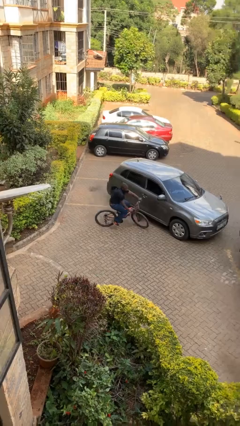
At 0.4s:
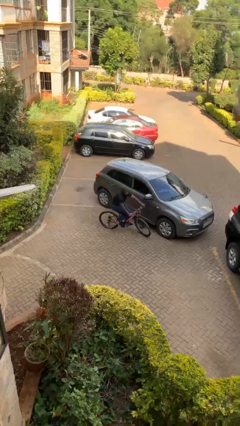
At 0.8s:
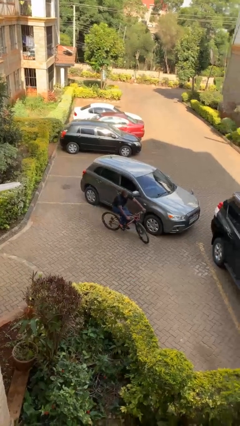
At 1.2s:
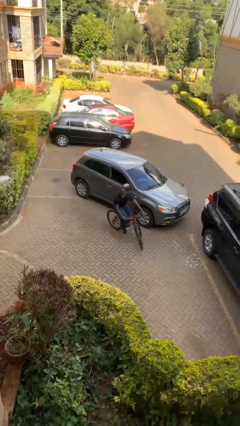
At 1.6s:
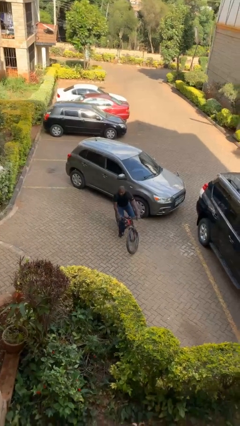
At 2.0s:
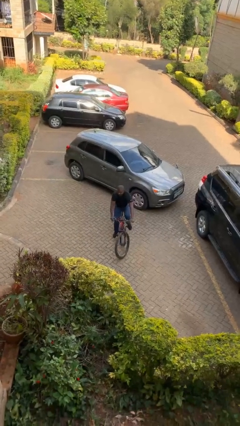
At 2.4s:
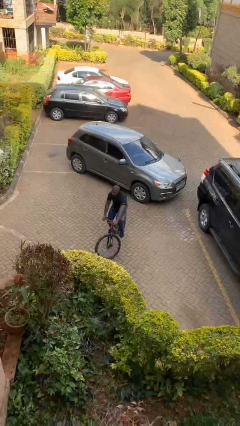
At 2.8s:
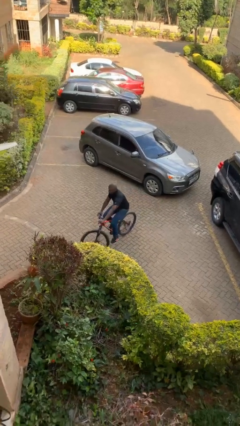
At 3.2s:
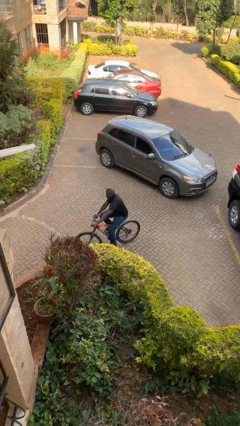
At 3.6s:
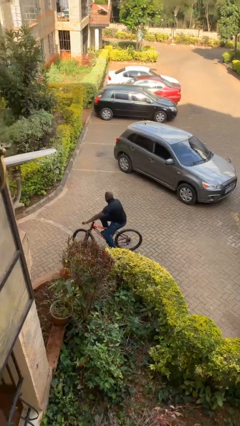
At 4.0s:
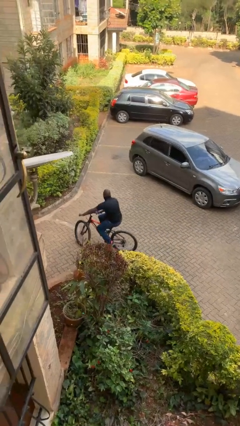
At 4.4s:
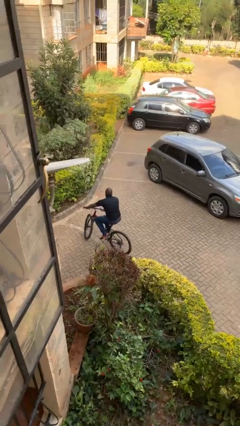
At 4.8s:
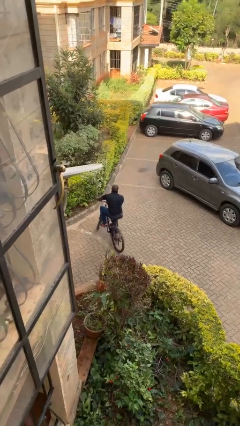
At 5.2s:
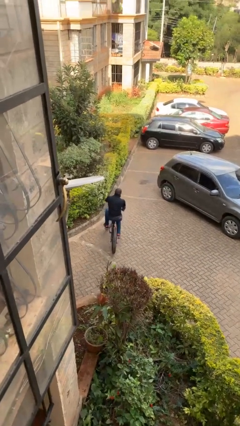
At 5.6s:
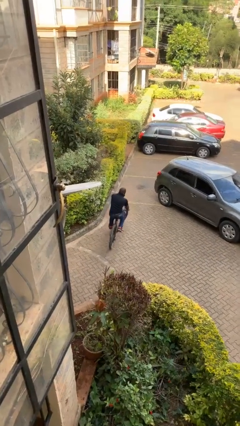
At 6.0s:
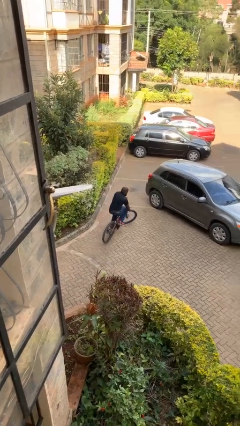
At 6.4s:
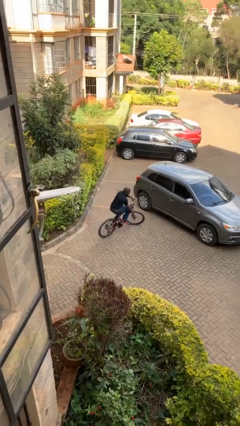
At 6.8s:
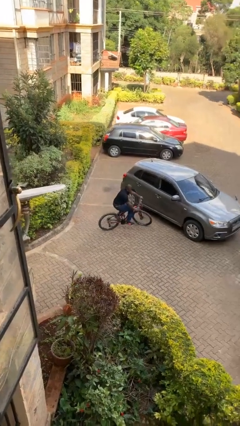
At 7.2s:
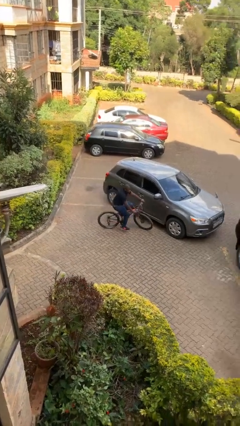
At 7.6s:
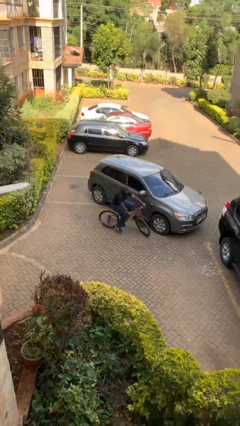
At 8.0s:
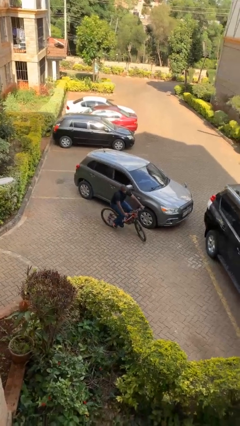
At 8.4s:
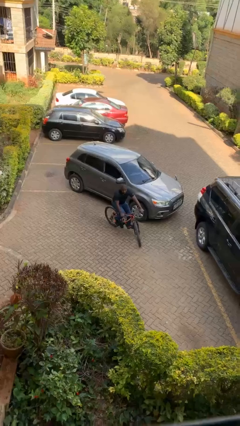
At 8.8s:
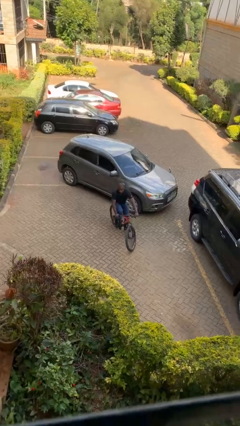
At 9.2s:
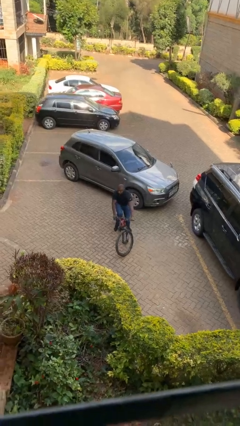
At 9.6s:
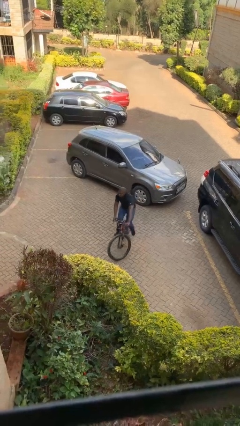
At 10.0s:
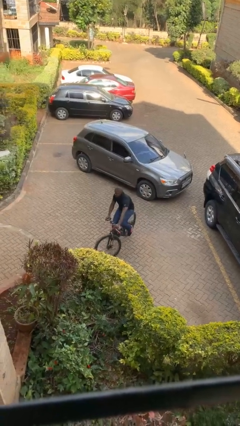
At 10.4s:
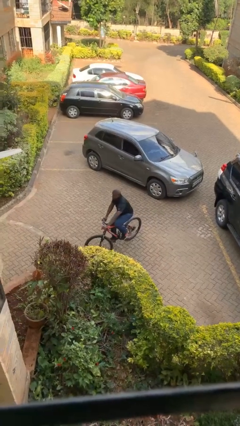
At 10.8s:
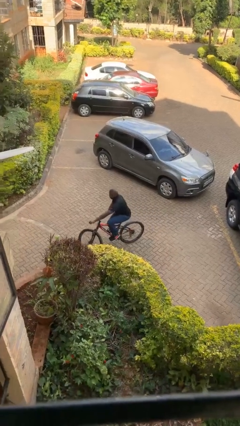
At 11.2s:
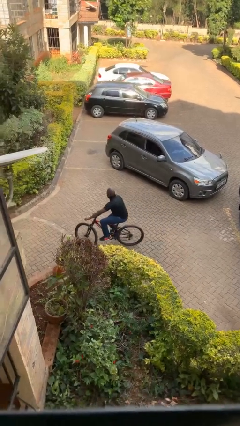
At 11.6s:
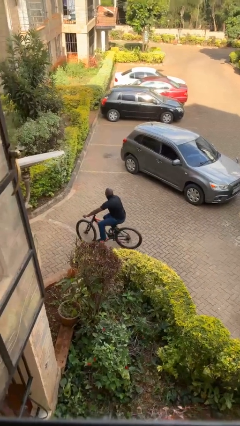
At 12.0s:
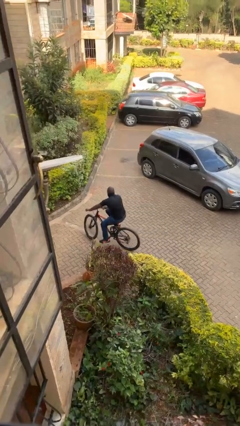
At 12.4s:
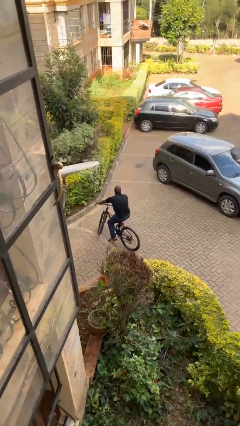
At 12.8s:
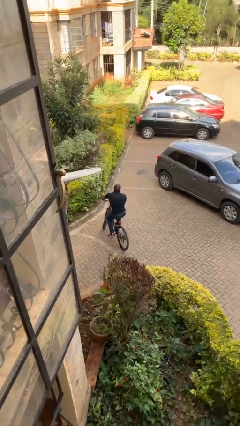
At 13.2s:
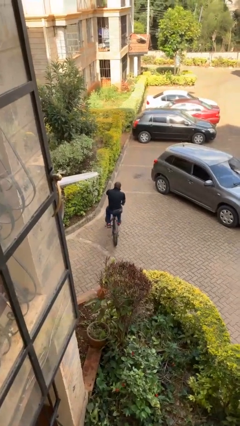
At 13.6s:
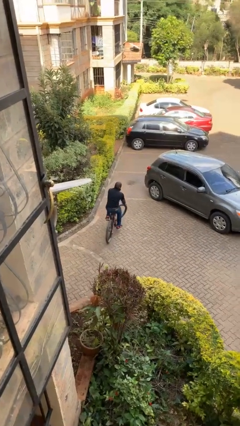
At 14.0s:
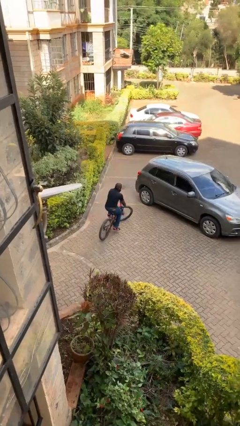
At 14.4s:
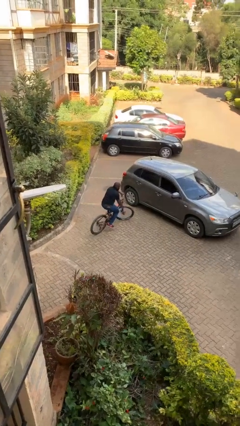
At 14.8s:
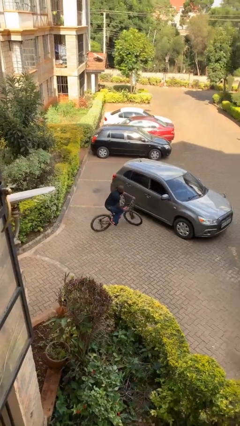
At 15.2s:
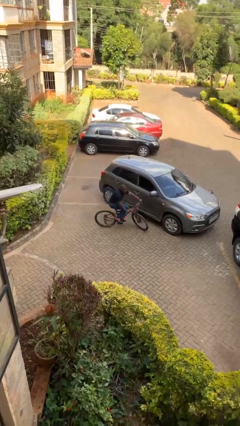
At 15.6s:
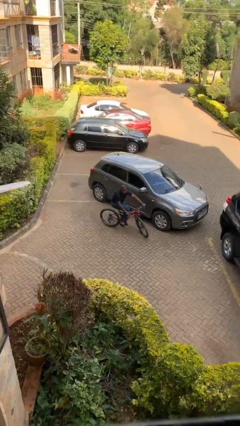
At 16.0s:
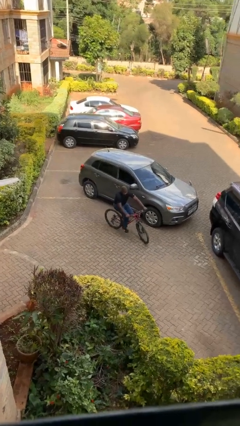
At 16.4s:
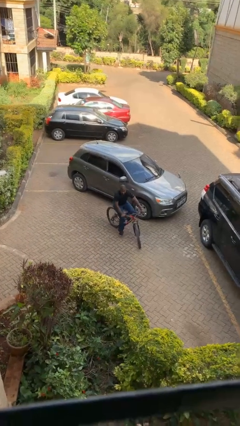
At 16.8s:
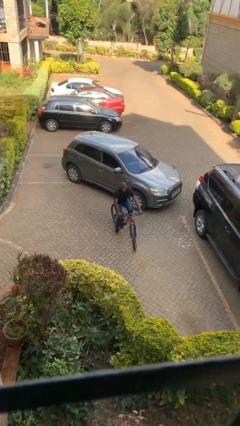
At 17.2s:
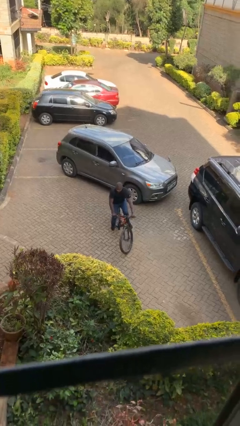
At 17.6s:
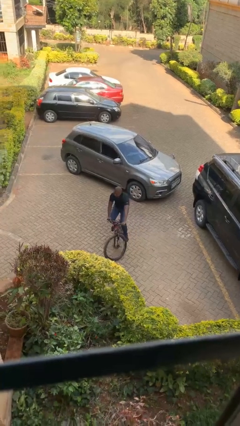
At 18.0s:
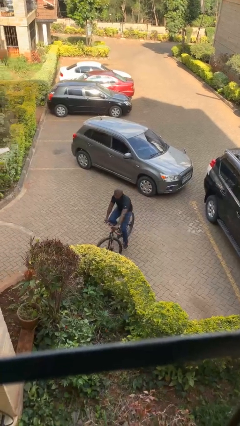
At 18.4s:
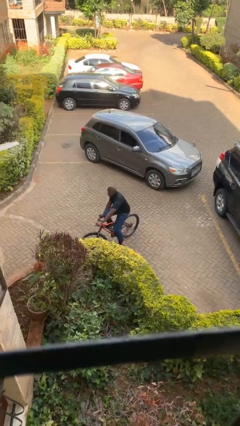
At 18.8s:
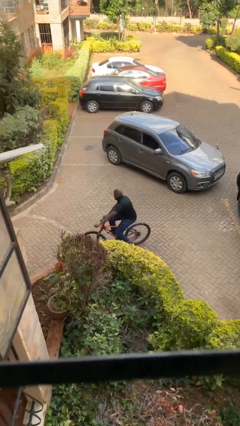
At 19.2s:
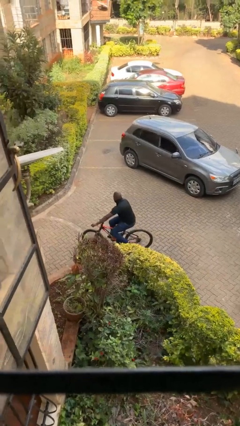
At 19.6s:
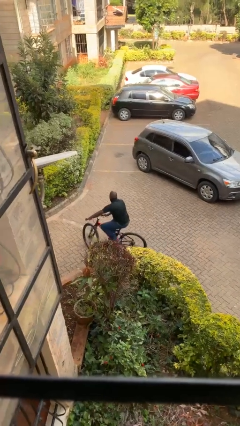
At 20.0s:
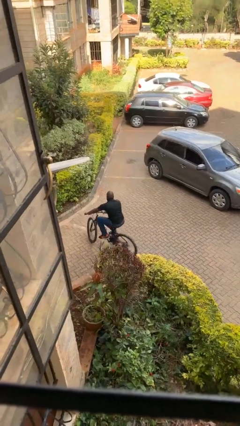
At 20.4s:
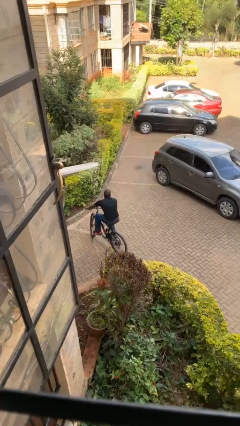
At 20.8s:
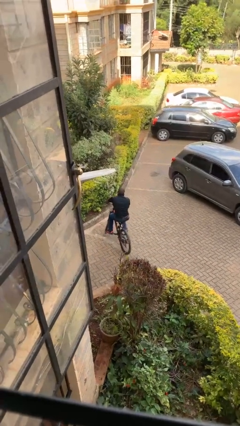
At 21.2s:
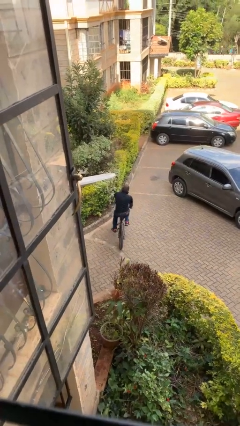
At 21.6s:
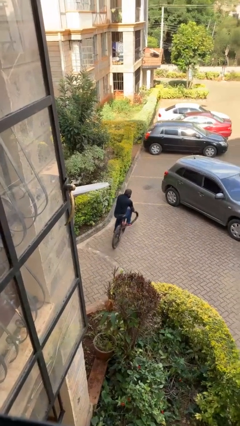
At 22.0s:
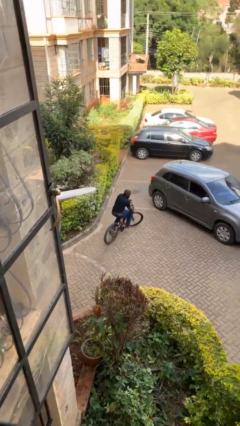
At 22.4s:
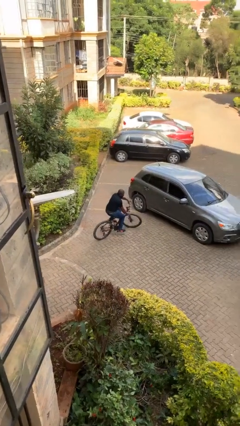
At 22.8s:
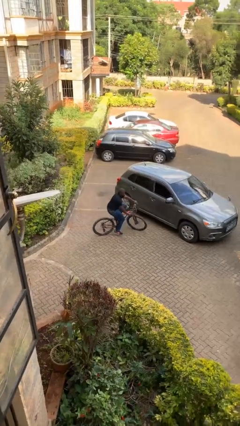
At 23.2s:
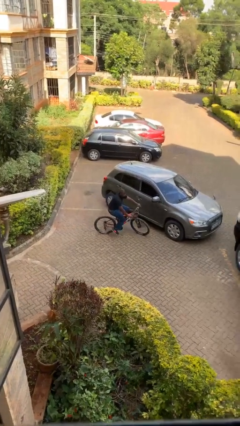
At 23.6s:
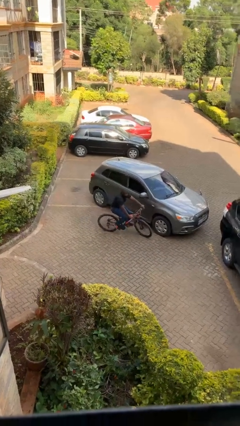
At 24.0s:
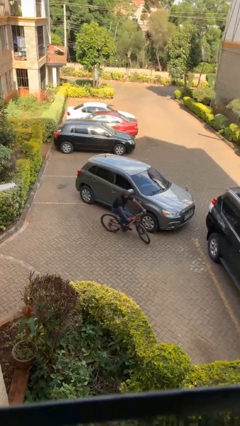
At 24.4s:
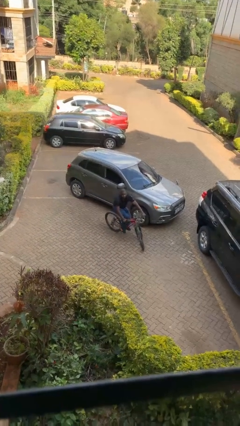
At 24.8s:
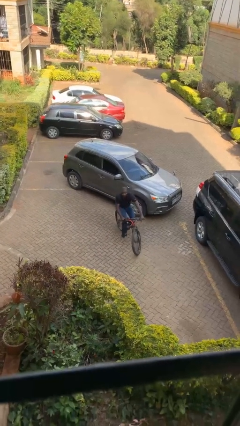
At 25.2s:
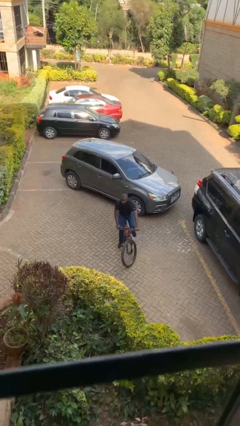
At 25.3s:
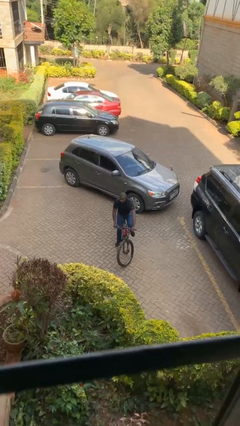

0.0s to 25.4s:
person rides bicycle

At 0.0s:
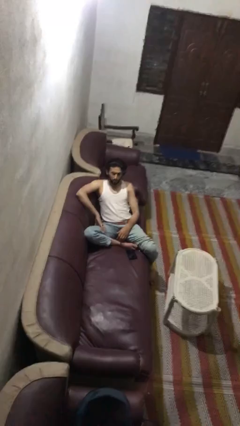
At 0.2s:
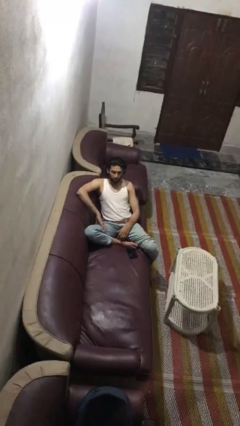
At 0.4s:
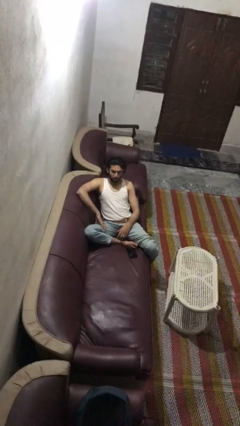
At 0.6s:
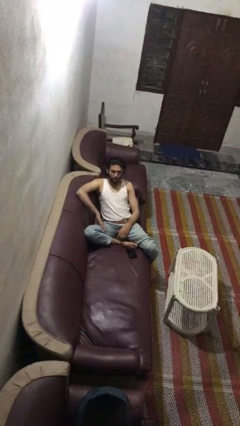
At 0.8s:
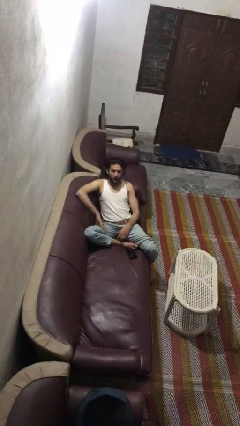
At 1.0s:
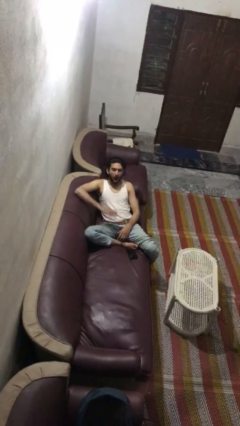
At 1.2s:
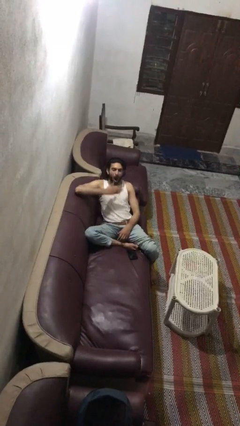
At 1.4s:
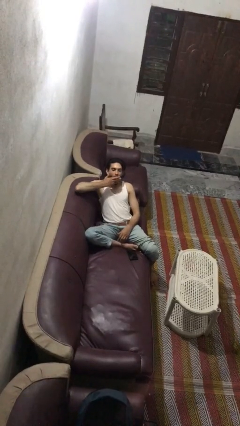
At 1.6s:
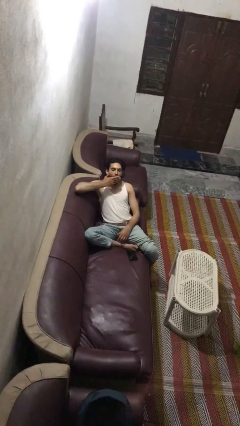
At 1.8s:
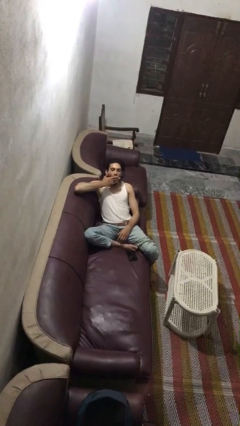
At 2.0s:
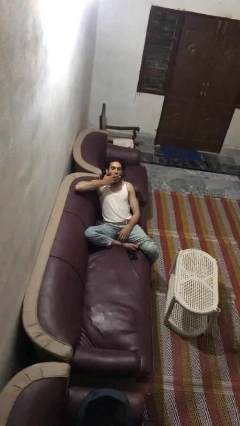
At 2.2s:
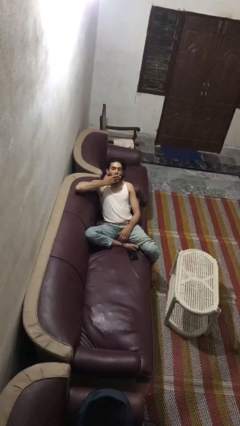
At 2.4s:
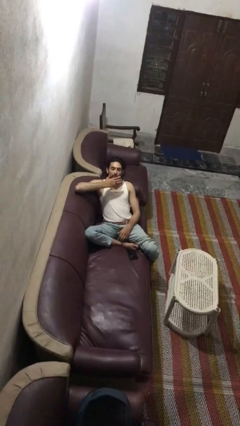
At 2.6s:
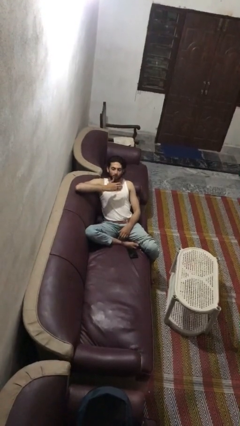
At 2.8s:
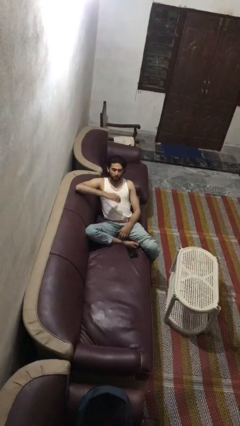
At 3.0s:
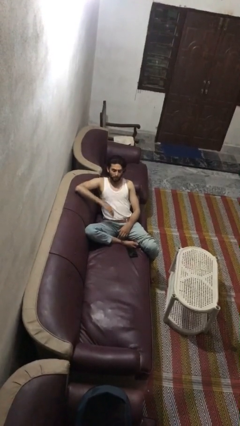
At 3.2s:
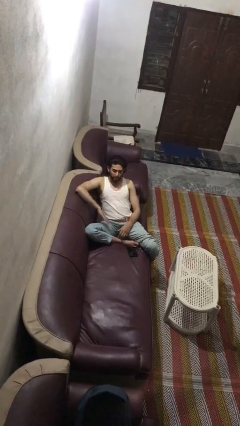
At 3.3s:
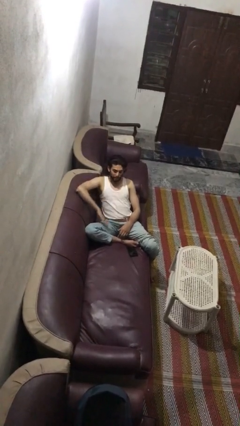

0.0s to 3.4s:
person yawns

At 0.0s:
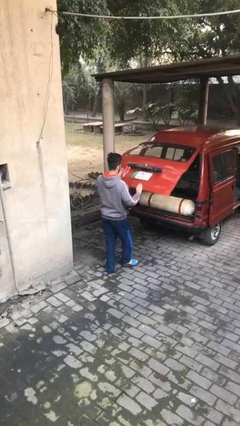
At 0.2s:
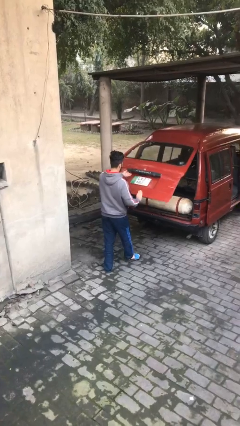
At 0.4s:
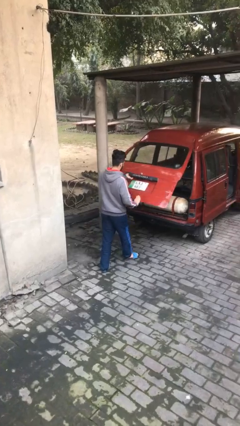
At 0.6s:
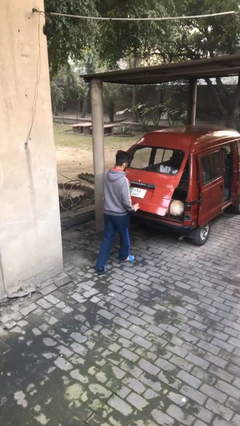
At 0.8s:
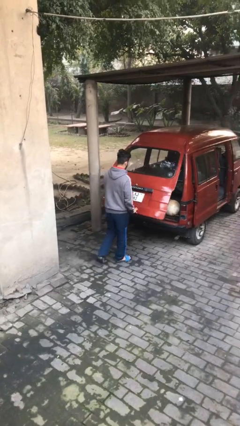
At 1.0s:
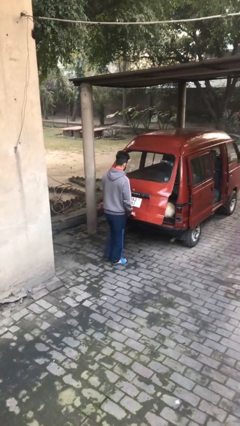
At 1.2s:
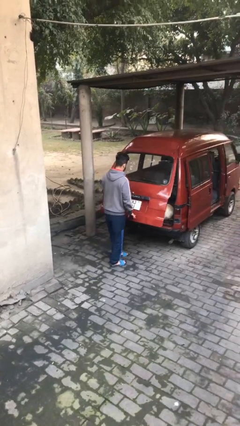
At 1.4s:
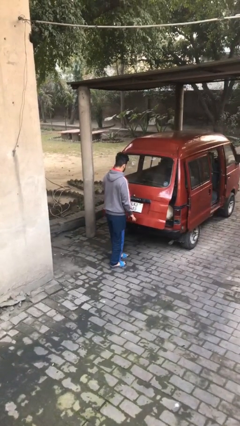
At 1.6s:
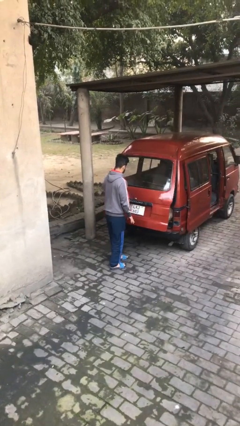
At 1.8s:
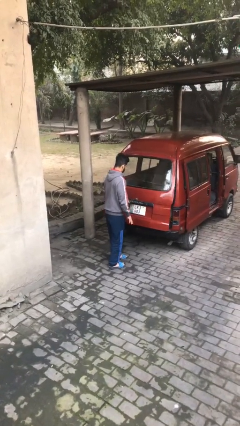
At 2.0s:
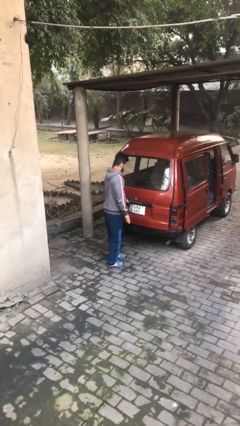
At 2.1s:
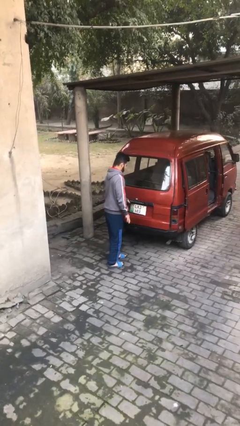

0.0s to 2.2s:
person closes car trunk
